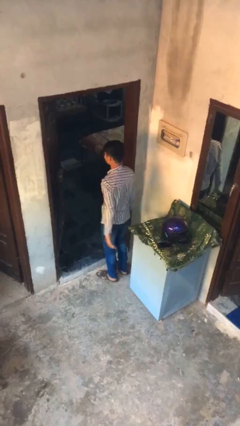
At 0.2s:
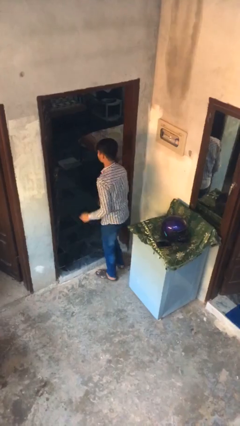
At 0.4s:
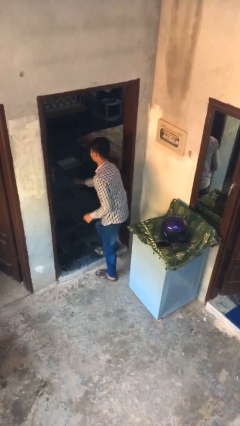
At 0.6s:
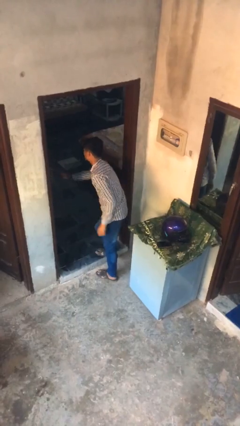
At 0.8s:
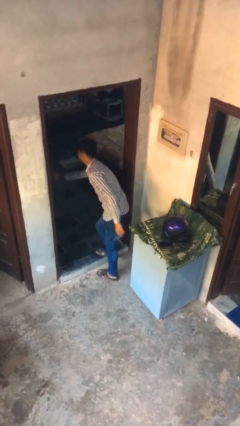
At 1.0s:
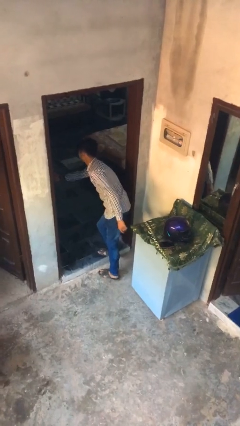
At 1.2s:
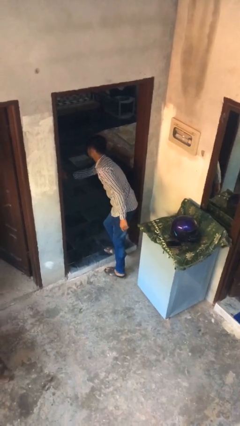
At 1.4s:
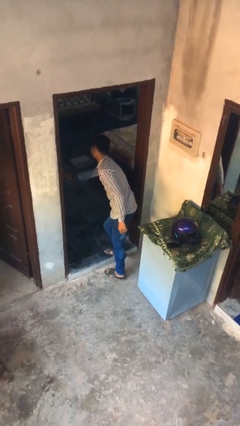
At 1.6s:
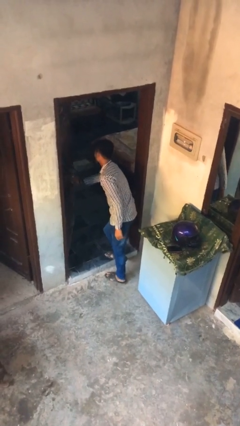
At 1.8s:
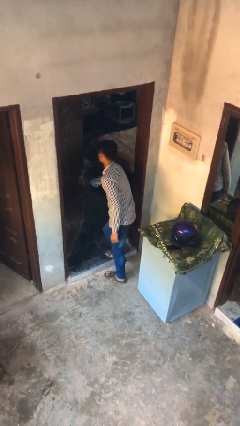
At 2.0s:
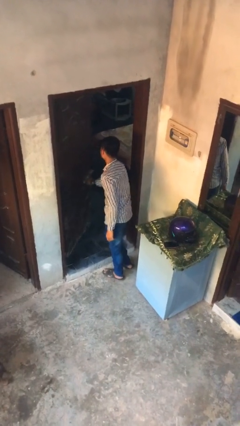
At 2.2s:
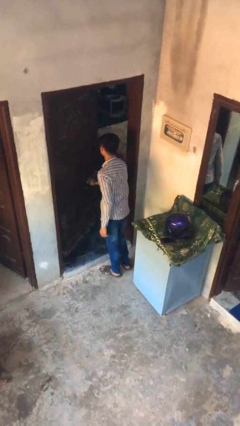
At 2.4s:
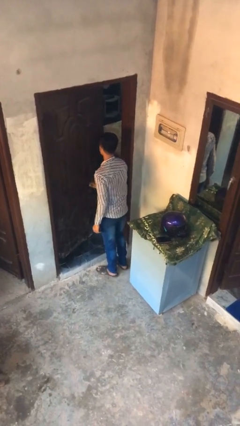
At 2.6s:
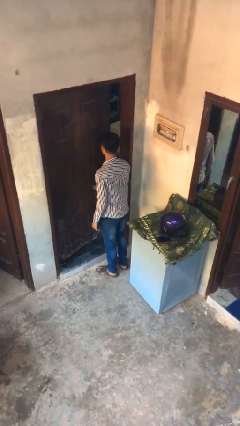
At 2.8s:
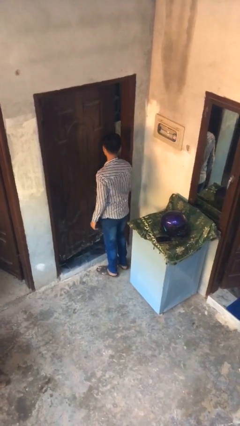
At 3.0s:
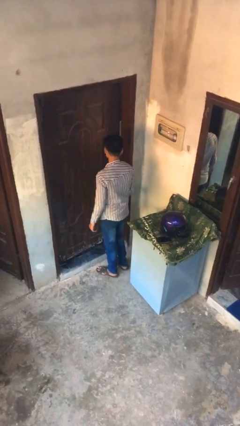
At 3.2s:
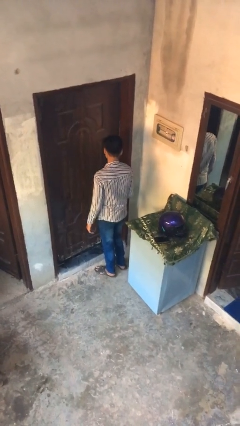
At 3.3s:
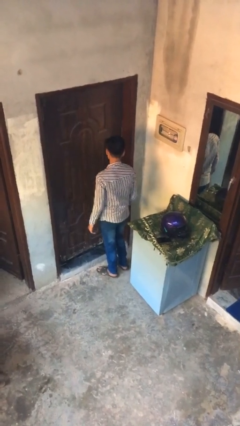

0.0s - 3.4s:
person closes facility door

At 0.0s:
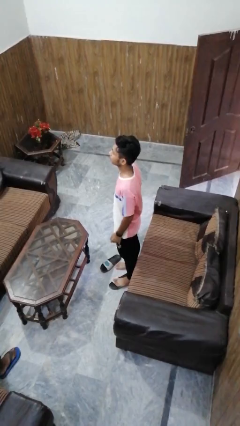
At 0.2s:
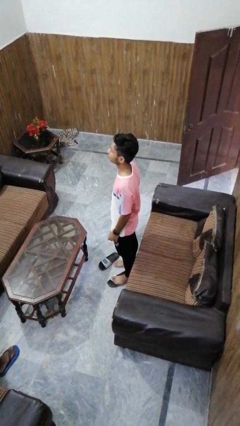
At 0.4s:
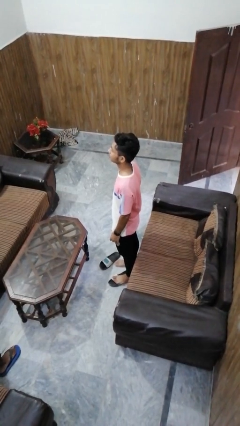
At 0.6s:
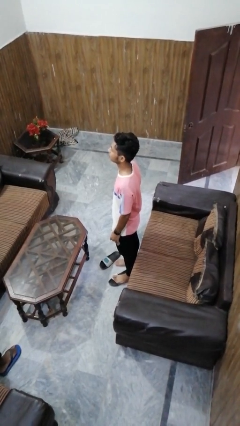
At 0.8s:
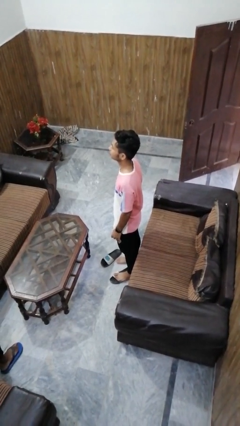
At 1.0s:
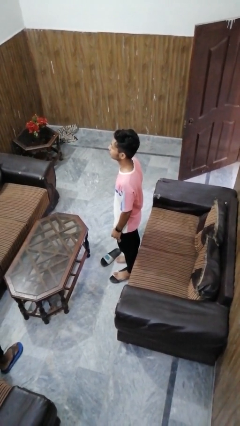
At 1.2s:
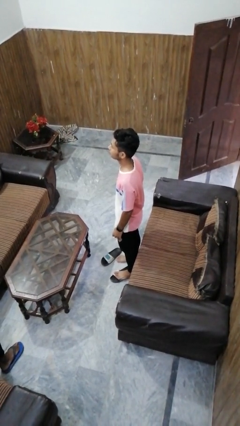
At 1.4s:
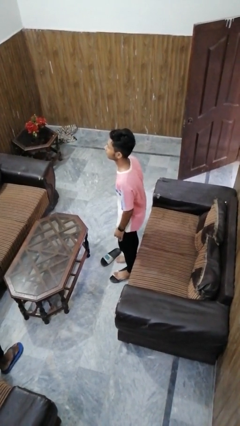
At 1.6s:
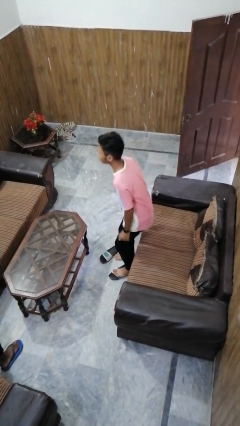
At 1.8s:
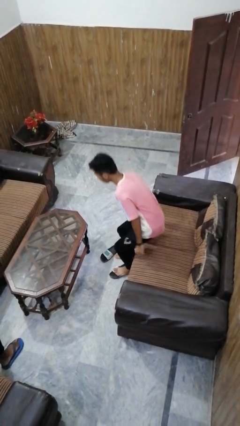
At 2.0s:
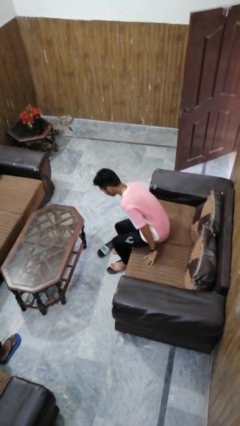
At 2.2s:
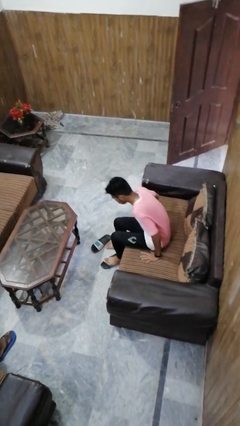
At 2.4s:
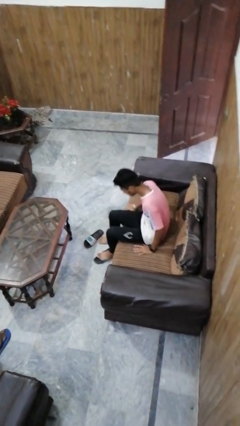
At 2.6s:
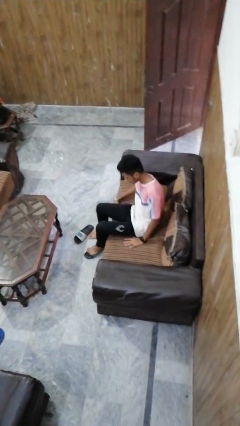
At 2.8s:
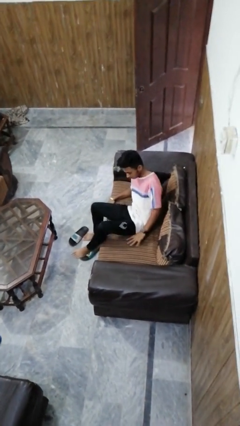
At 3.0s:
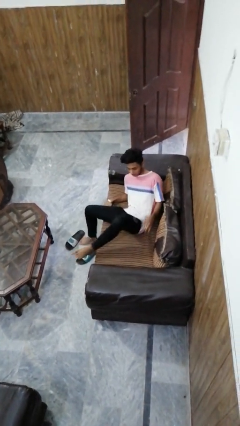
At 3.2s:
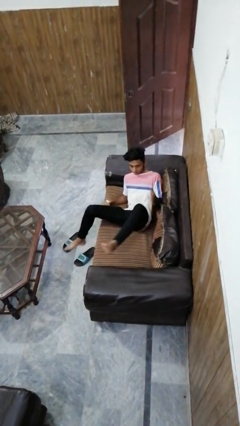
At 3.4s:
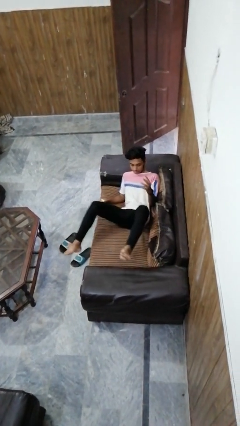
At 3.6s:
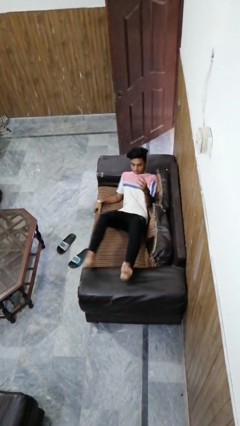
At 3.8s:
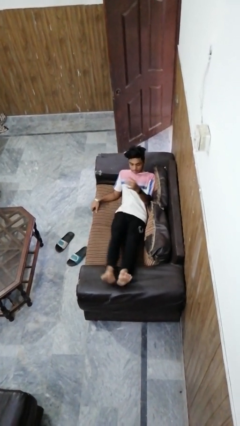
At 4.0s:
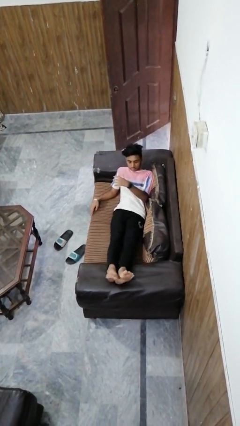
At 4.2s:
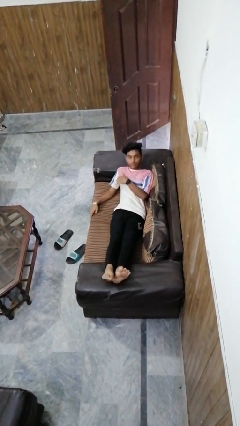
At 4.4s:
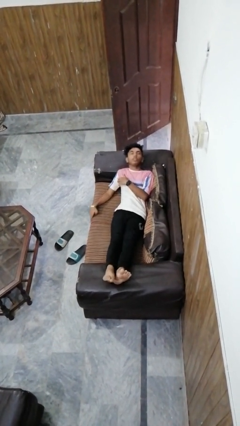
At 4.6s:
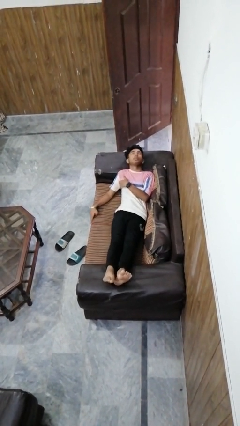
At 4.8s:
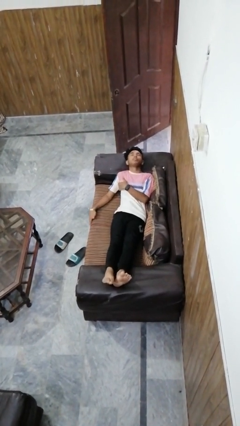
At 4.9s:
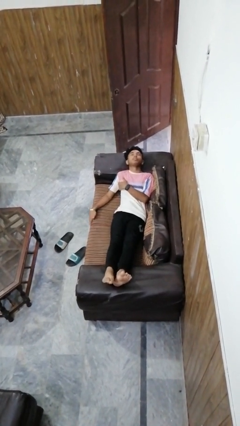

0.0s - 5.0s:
person lies down on couch

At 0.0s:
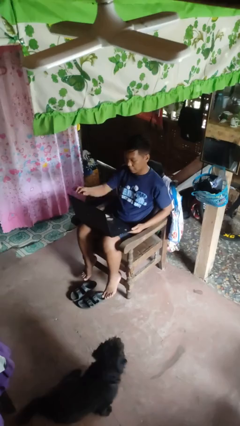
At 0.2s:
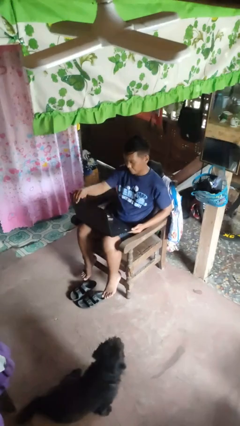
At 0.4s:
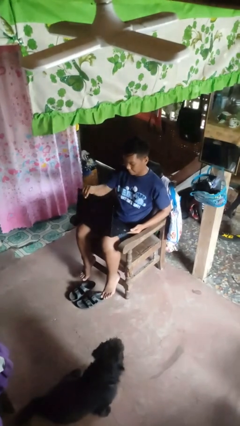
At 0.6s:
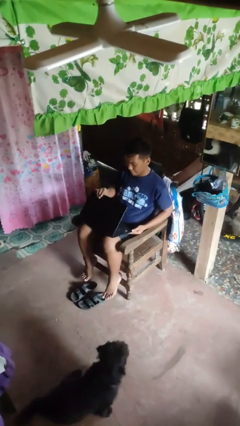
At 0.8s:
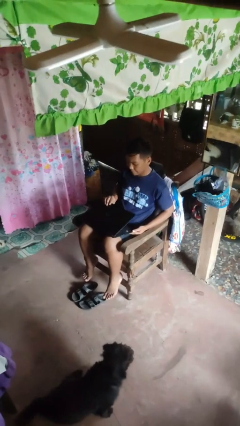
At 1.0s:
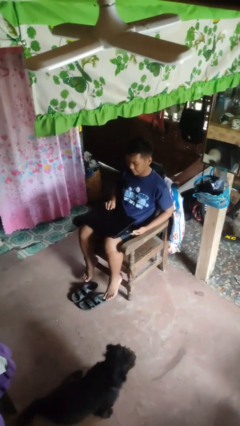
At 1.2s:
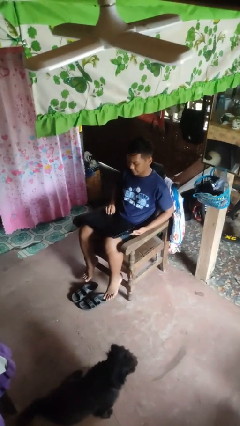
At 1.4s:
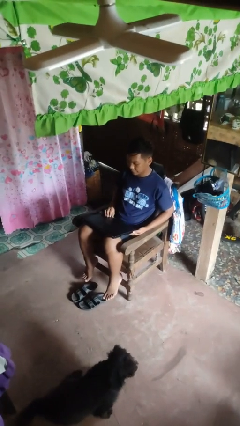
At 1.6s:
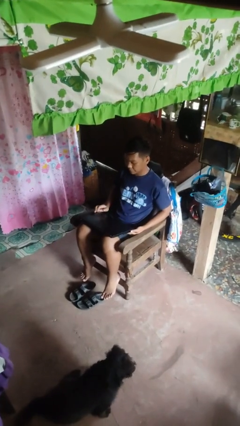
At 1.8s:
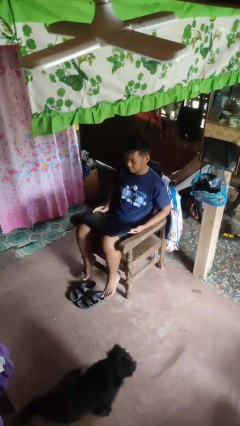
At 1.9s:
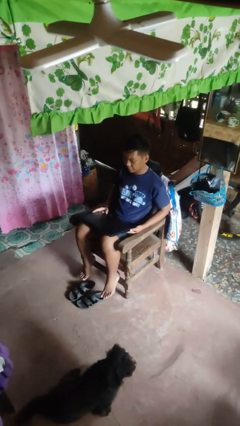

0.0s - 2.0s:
person closes laptop

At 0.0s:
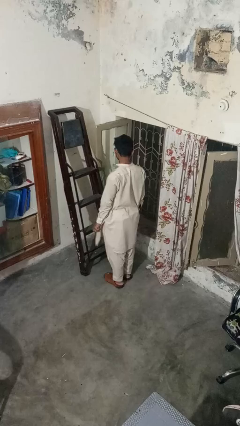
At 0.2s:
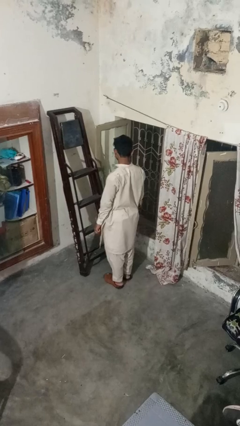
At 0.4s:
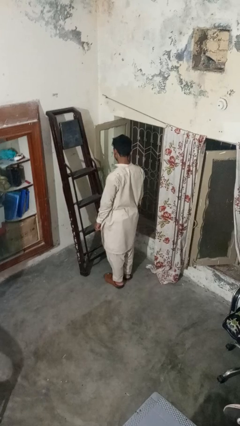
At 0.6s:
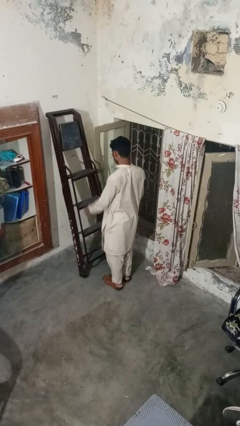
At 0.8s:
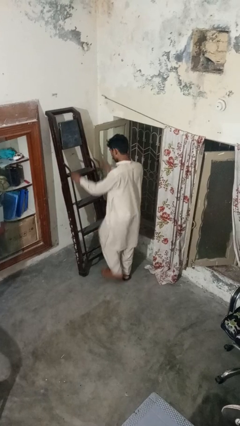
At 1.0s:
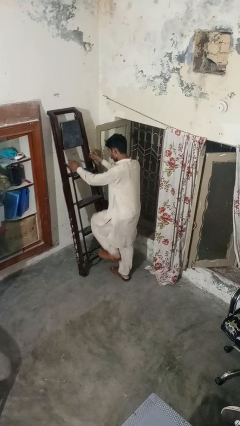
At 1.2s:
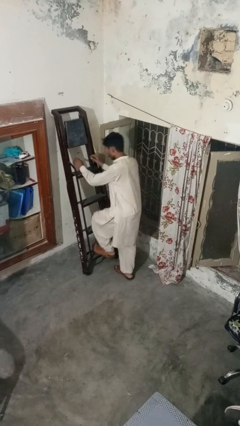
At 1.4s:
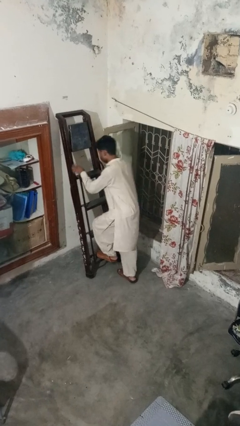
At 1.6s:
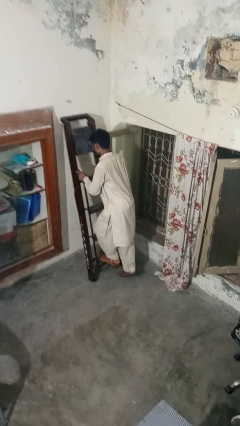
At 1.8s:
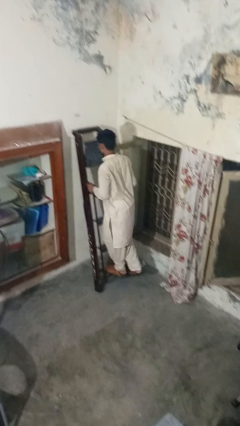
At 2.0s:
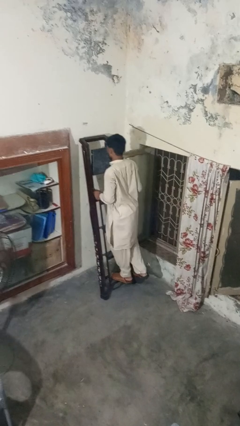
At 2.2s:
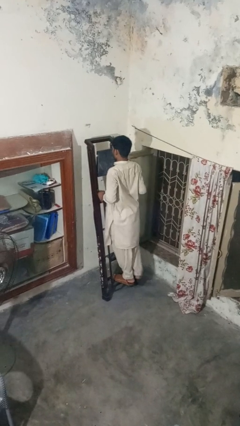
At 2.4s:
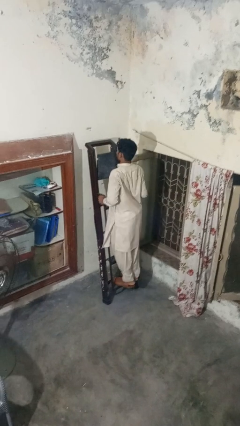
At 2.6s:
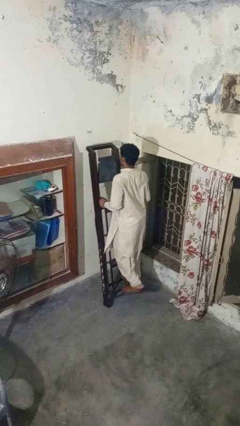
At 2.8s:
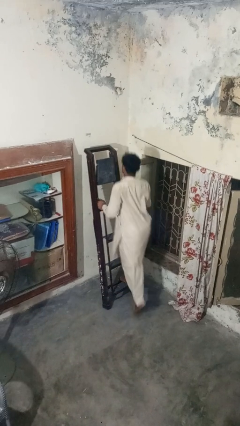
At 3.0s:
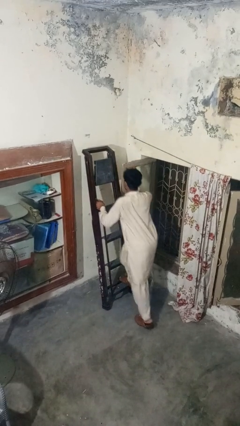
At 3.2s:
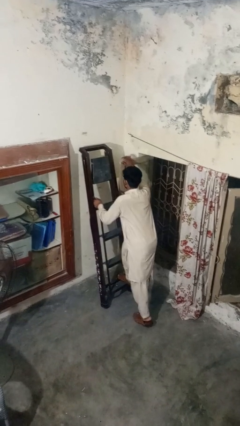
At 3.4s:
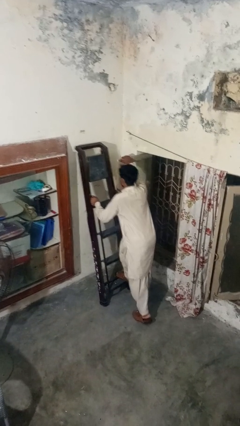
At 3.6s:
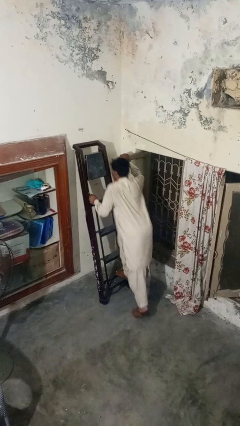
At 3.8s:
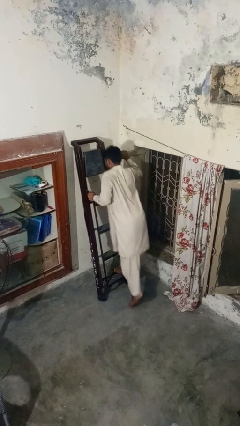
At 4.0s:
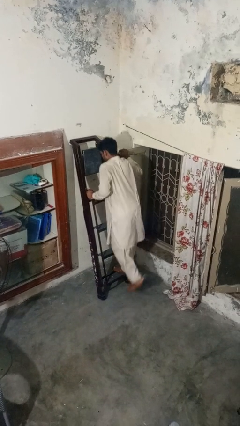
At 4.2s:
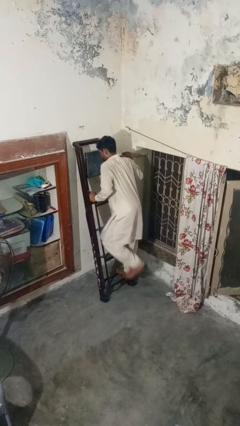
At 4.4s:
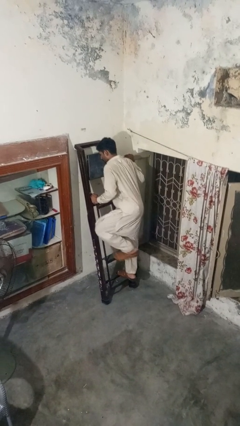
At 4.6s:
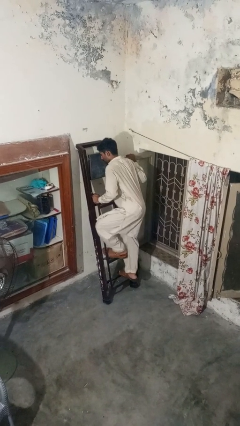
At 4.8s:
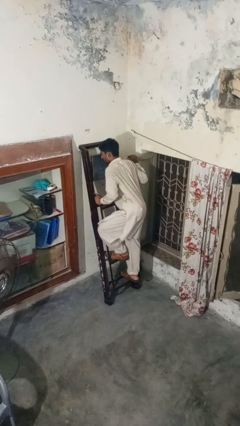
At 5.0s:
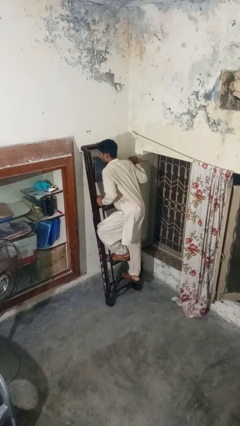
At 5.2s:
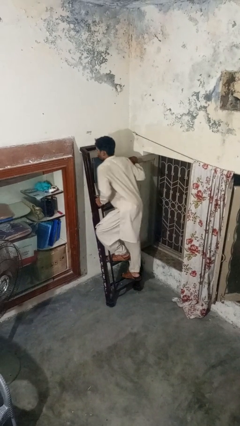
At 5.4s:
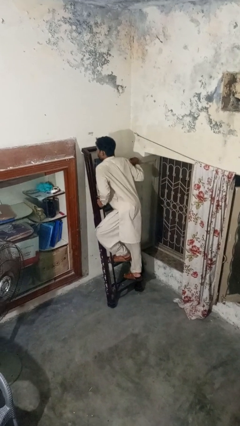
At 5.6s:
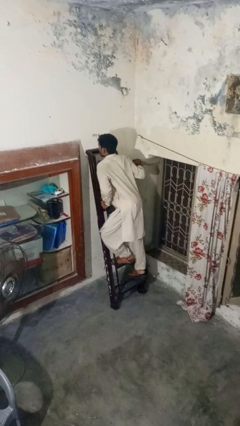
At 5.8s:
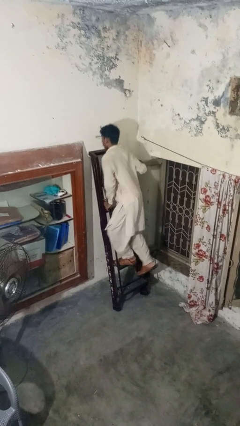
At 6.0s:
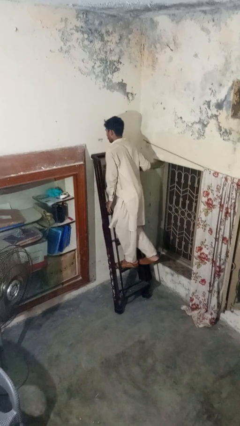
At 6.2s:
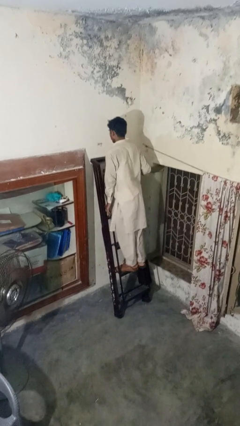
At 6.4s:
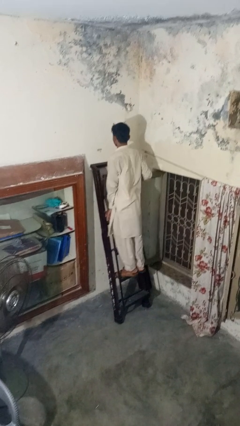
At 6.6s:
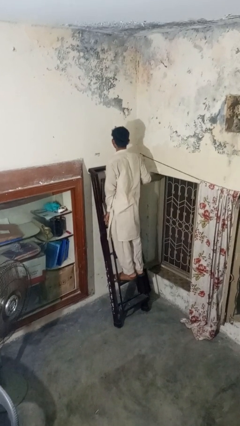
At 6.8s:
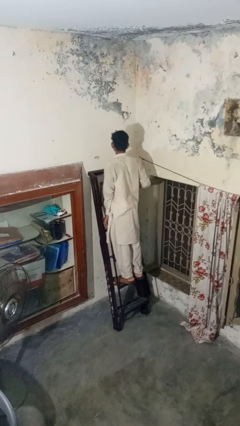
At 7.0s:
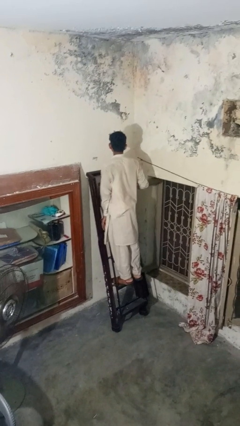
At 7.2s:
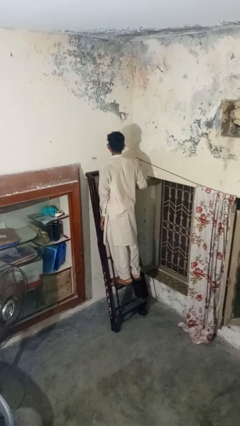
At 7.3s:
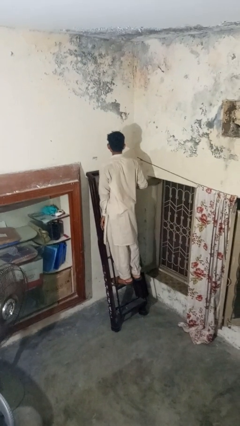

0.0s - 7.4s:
person climbs up ladder
